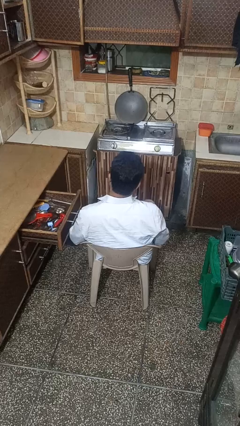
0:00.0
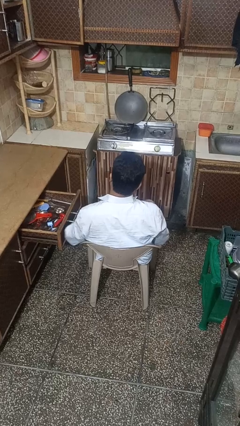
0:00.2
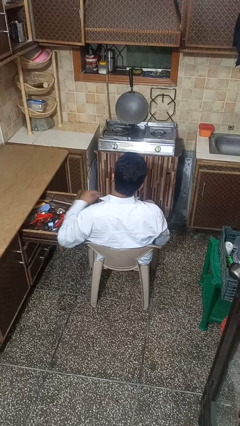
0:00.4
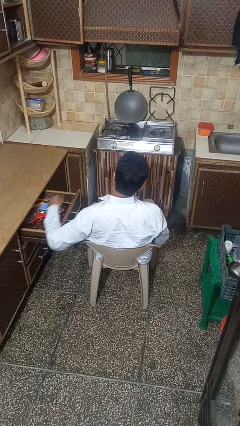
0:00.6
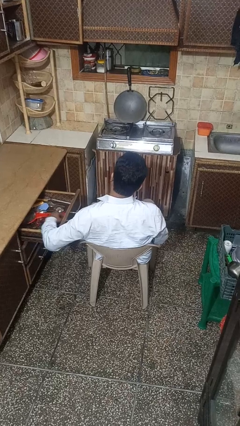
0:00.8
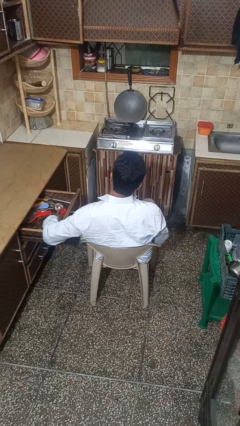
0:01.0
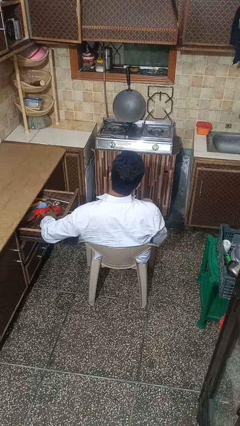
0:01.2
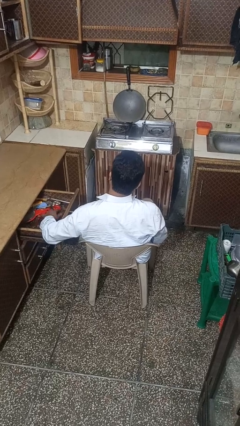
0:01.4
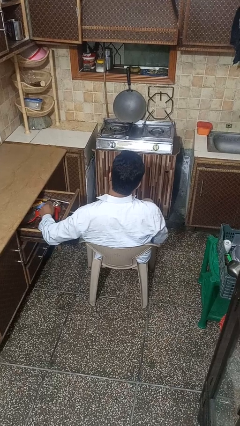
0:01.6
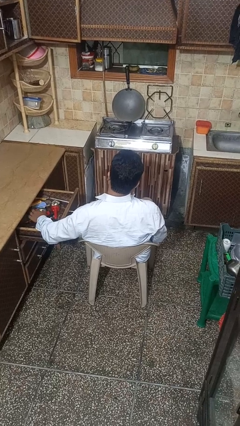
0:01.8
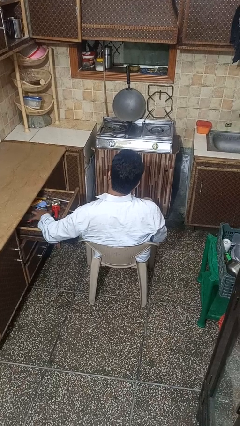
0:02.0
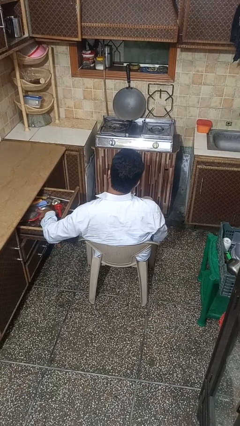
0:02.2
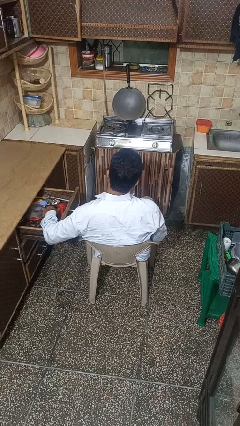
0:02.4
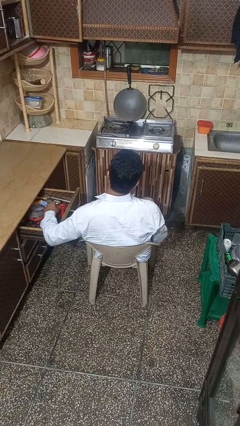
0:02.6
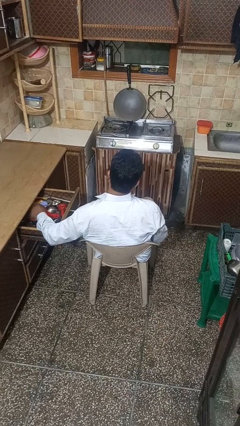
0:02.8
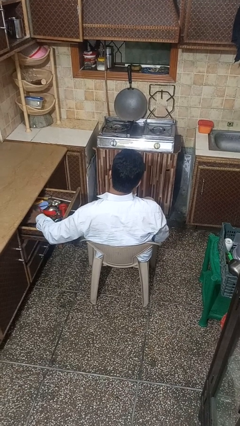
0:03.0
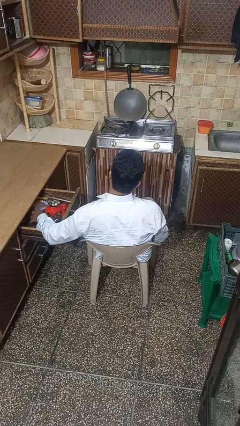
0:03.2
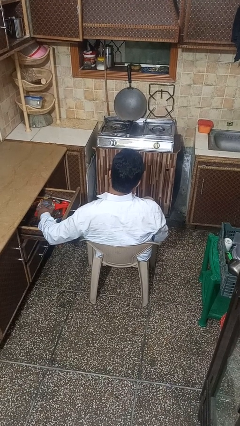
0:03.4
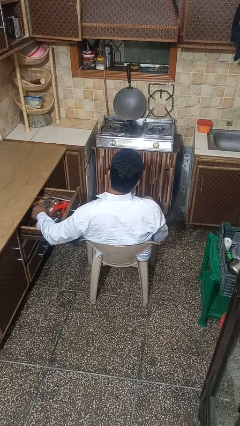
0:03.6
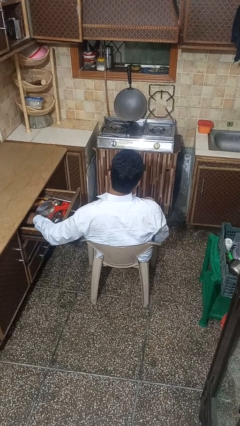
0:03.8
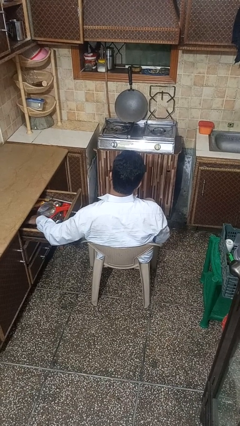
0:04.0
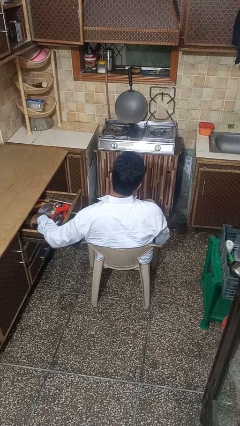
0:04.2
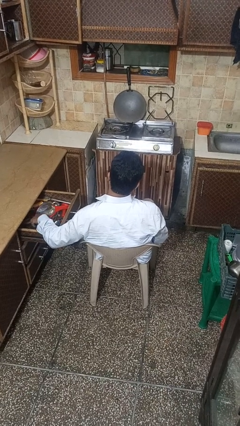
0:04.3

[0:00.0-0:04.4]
person searches in kitchen drawer

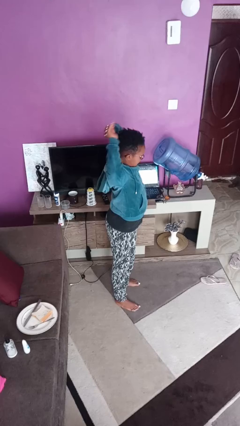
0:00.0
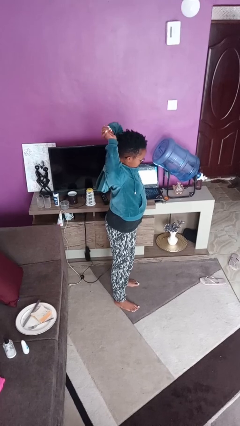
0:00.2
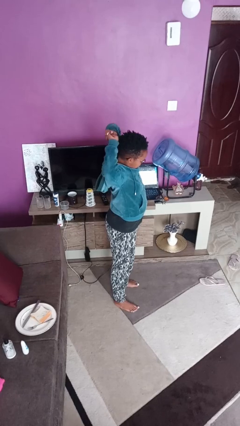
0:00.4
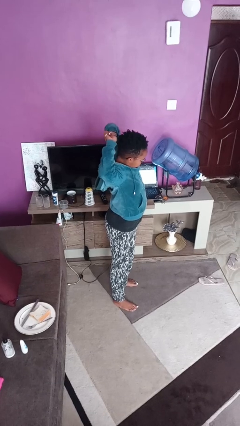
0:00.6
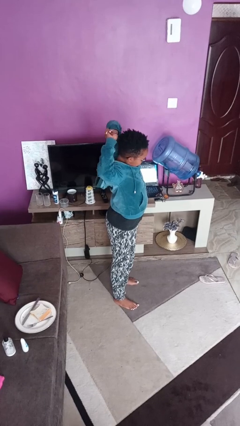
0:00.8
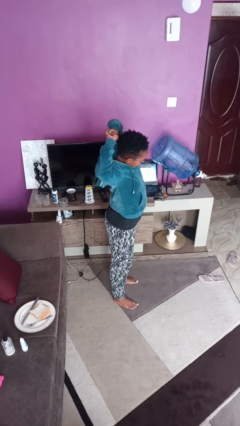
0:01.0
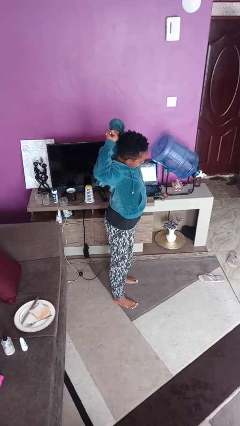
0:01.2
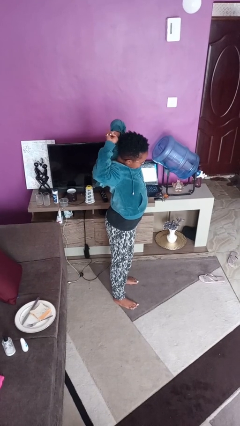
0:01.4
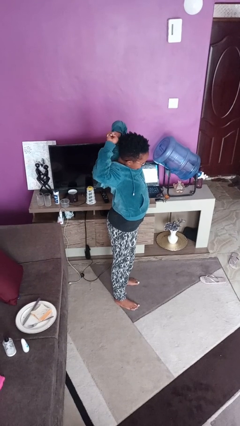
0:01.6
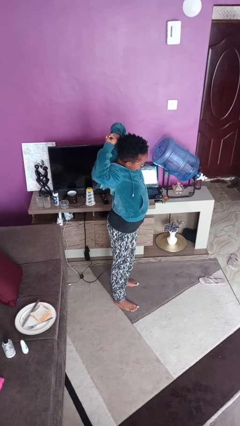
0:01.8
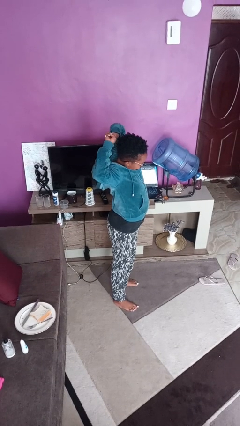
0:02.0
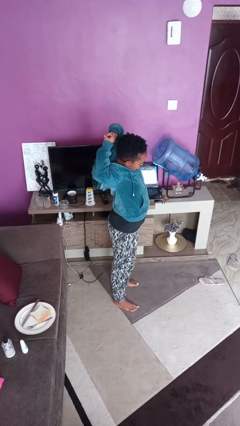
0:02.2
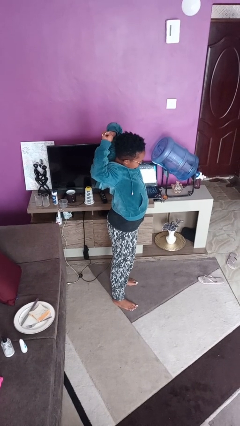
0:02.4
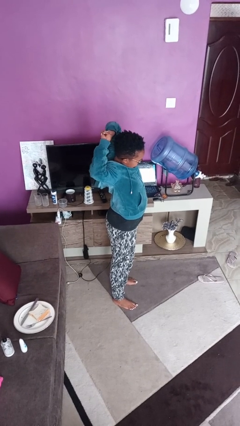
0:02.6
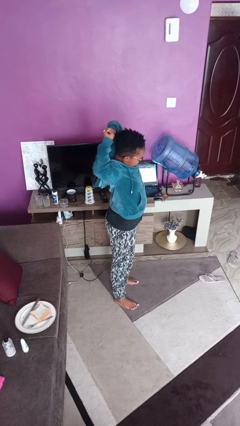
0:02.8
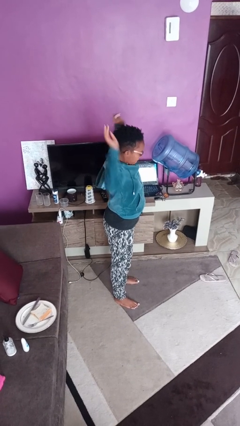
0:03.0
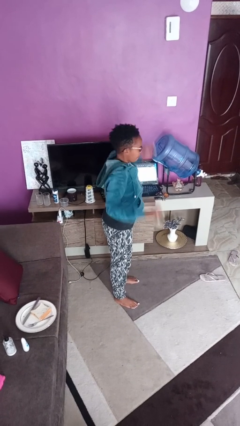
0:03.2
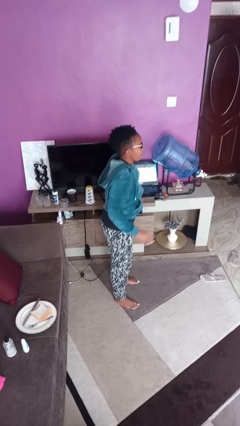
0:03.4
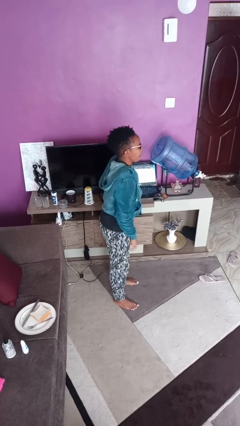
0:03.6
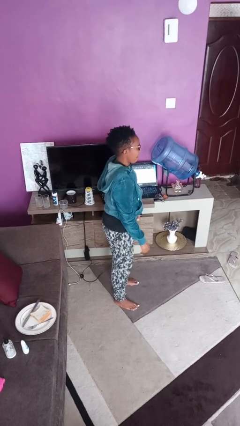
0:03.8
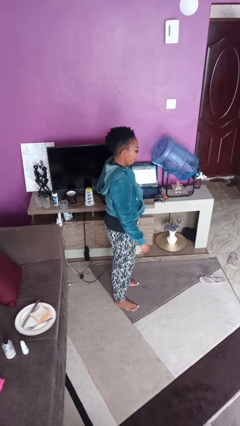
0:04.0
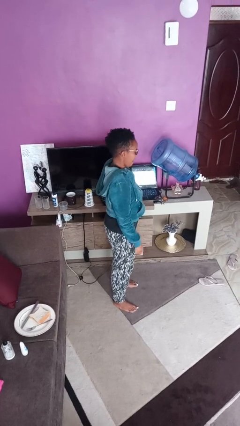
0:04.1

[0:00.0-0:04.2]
person stretches arms over head

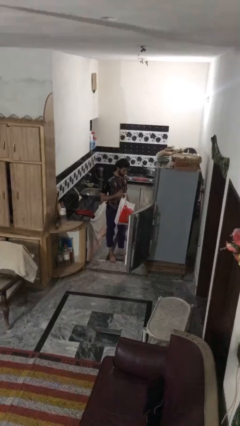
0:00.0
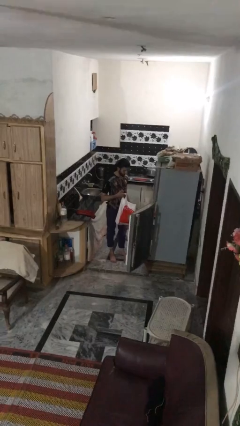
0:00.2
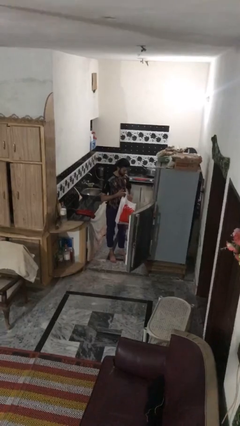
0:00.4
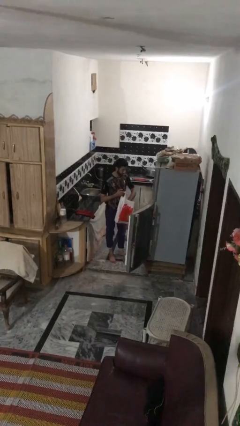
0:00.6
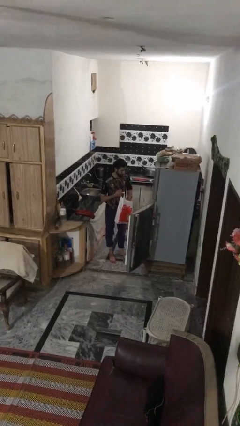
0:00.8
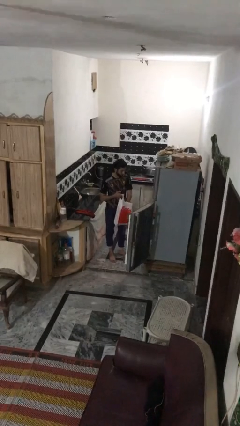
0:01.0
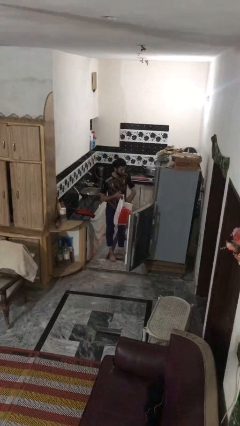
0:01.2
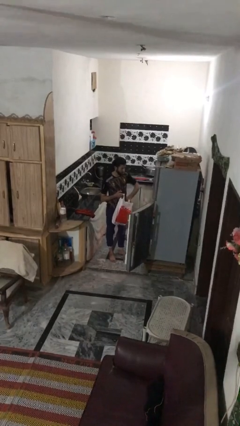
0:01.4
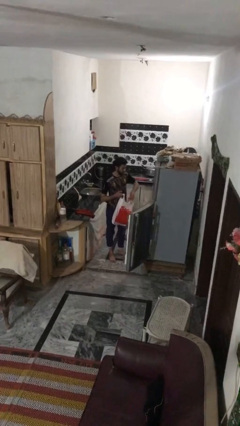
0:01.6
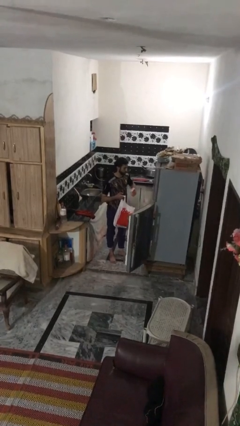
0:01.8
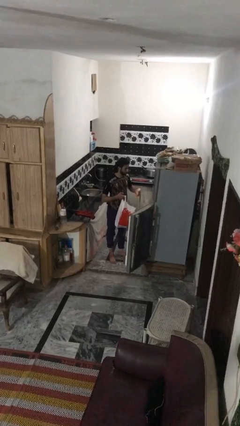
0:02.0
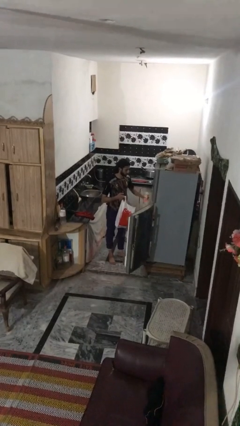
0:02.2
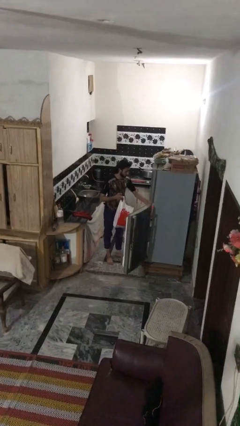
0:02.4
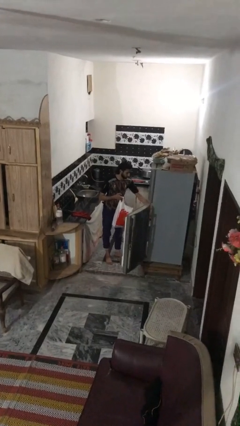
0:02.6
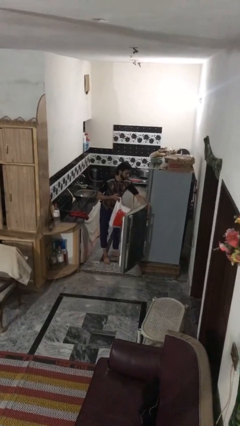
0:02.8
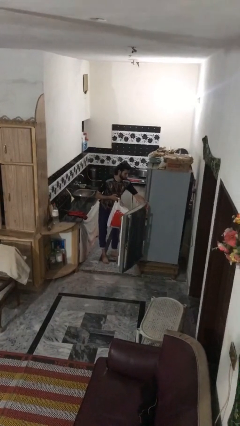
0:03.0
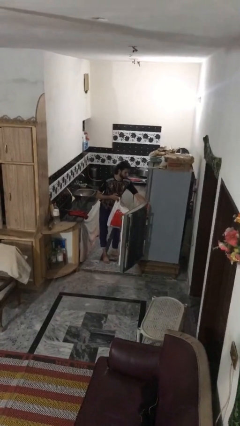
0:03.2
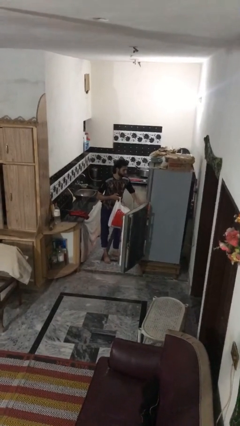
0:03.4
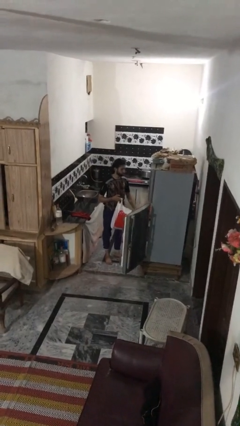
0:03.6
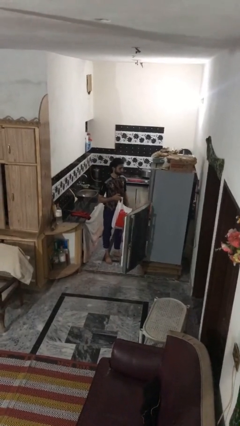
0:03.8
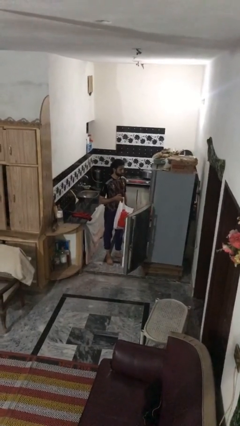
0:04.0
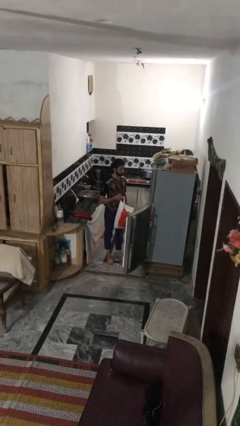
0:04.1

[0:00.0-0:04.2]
person loads groceries into refrigerator

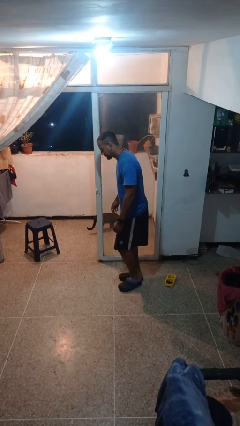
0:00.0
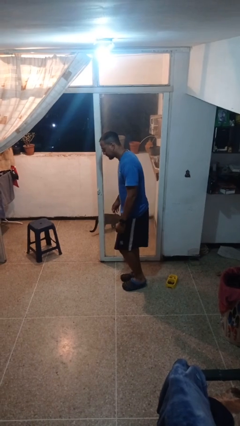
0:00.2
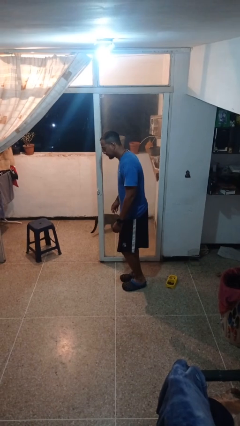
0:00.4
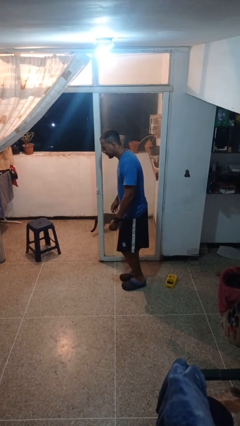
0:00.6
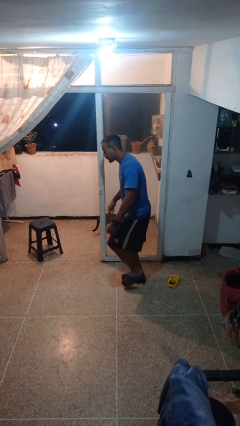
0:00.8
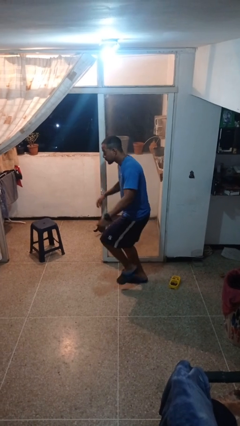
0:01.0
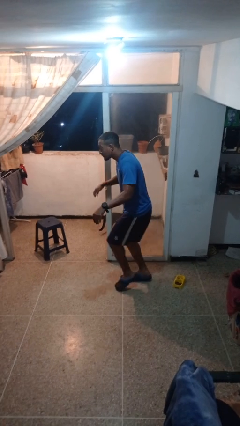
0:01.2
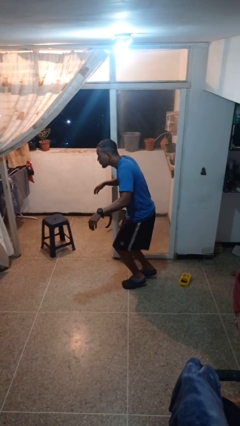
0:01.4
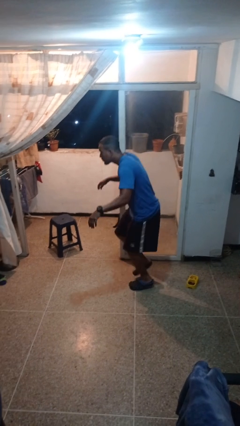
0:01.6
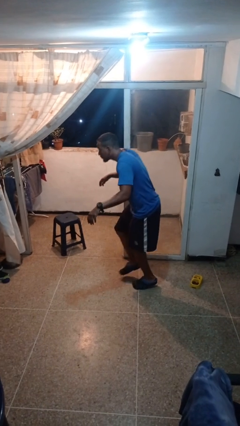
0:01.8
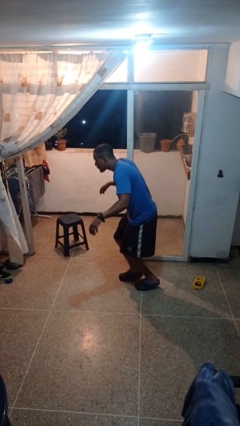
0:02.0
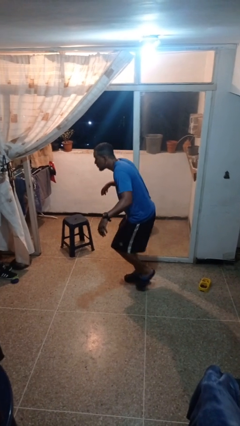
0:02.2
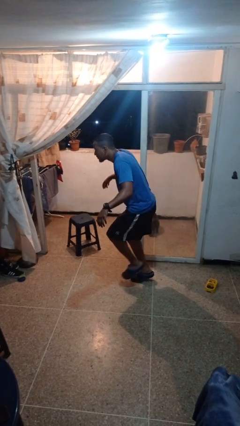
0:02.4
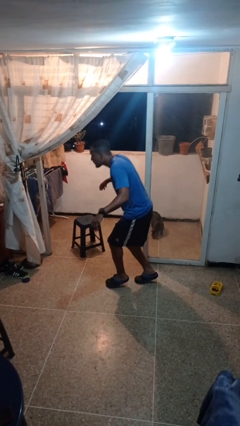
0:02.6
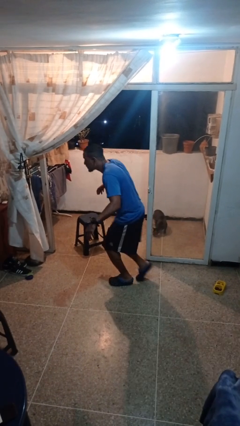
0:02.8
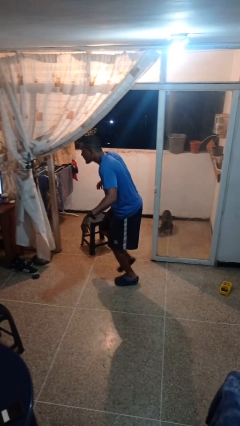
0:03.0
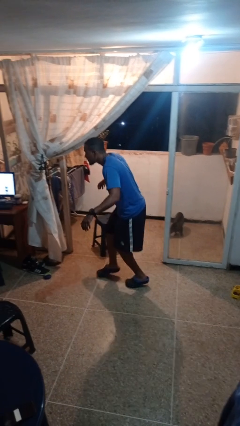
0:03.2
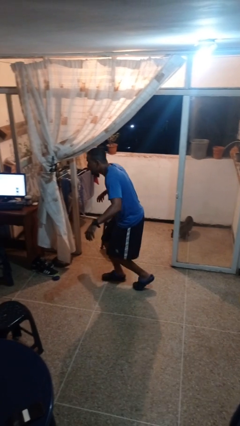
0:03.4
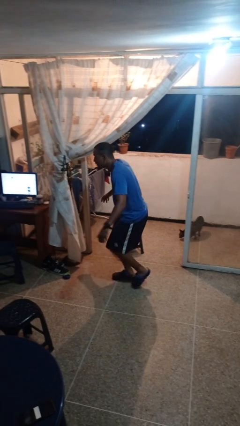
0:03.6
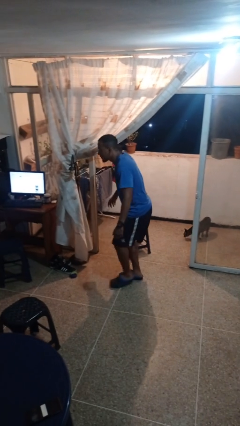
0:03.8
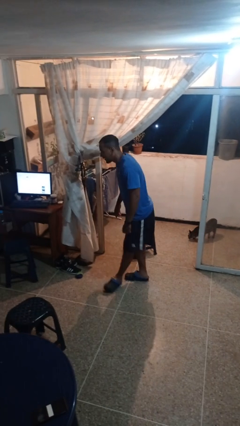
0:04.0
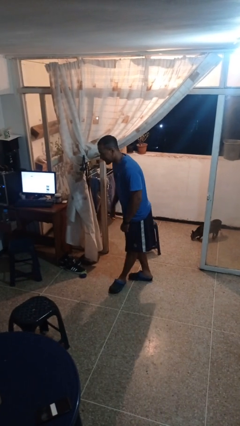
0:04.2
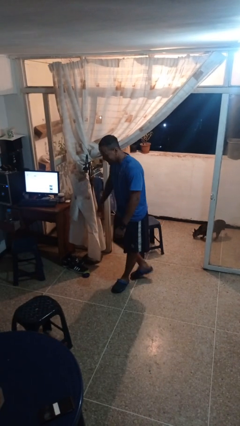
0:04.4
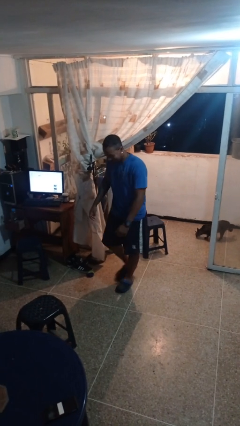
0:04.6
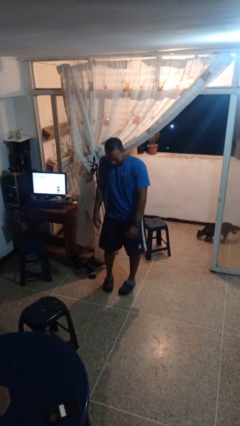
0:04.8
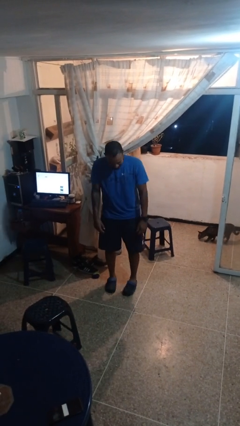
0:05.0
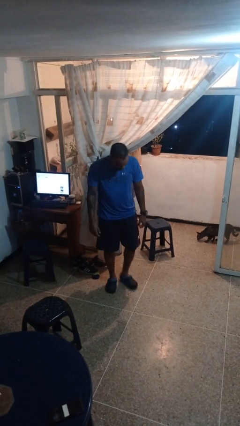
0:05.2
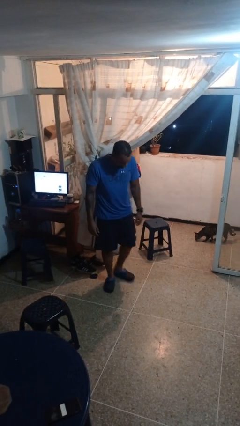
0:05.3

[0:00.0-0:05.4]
person walks tiptoe
